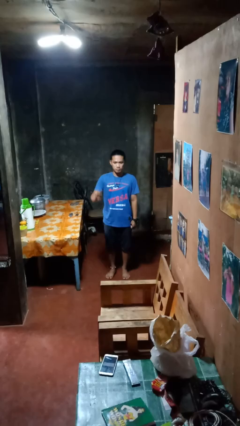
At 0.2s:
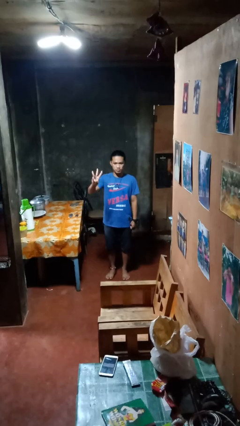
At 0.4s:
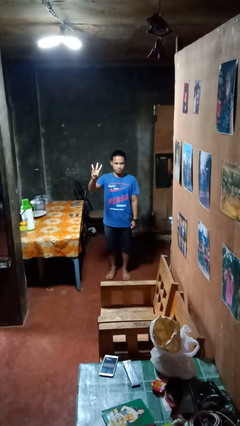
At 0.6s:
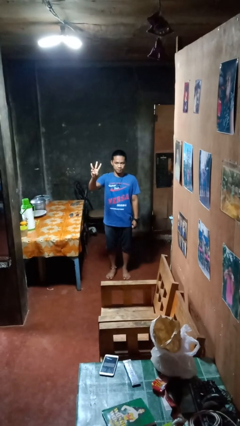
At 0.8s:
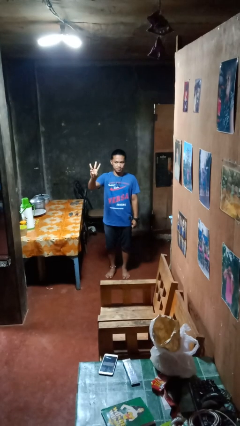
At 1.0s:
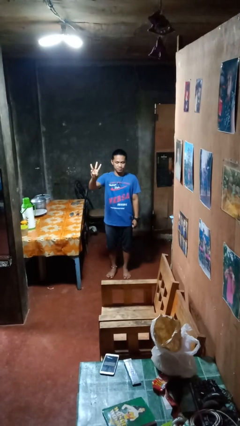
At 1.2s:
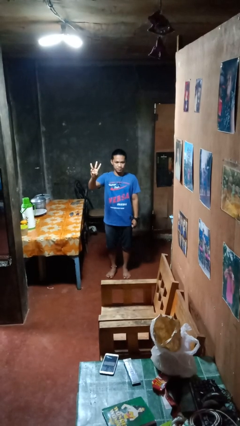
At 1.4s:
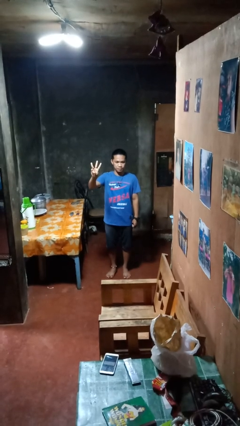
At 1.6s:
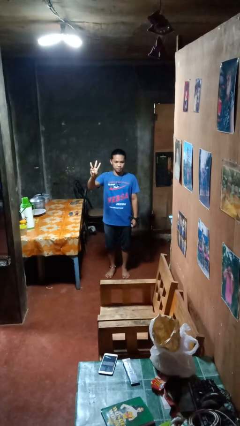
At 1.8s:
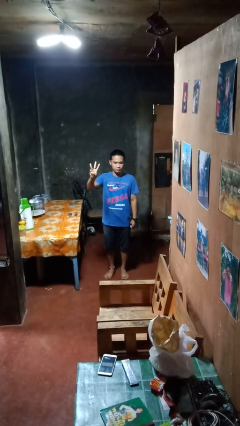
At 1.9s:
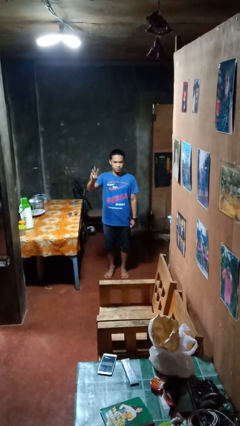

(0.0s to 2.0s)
person gestures number three

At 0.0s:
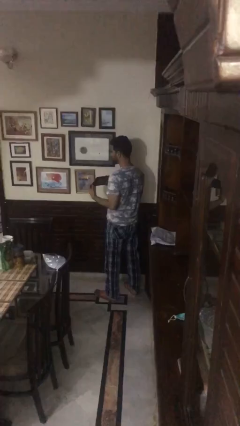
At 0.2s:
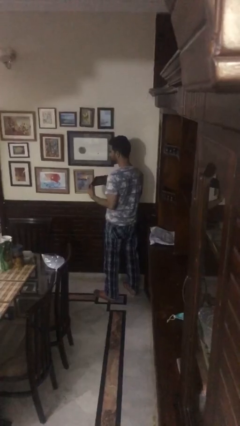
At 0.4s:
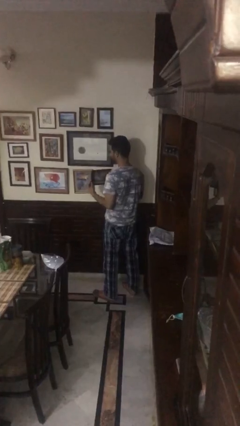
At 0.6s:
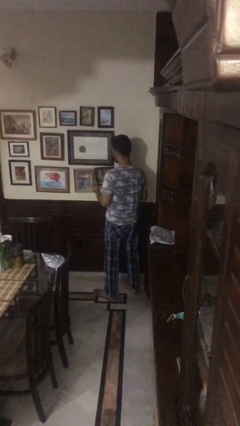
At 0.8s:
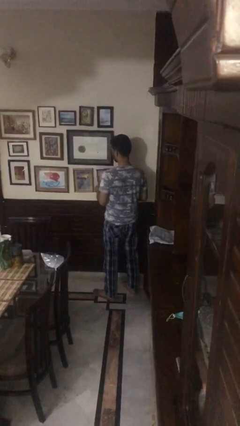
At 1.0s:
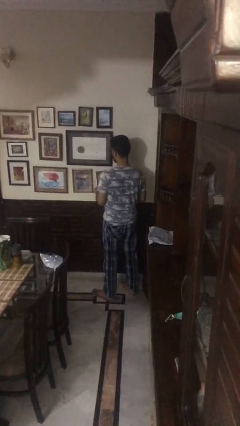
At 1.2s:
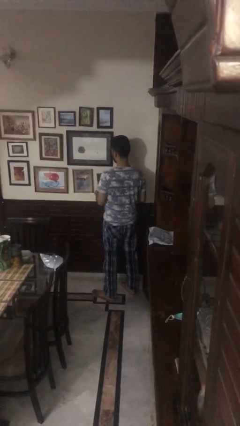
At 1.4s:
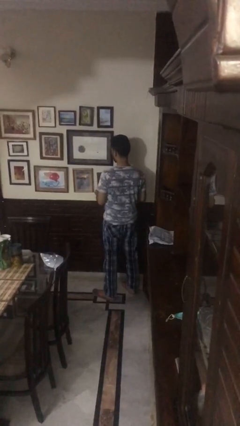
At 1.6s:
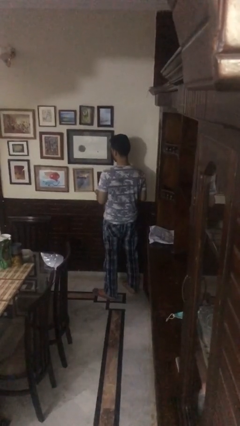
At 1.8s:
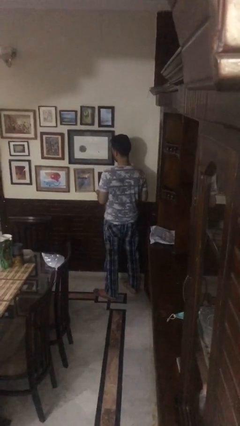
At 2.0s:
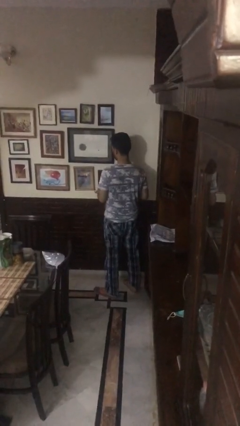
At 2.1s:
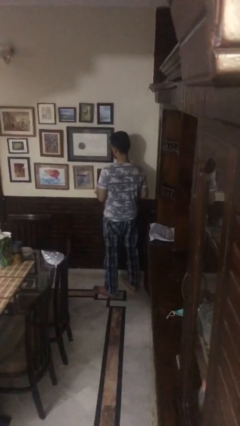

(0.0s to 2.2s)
person puts up picture frame

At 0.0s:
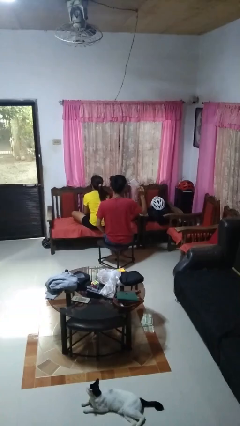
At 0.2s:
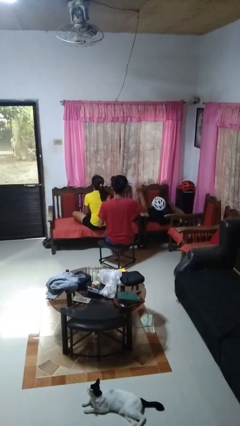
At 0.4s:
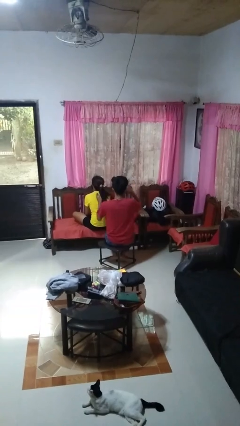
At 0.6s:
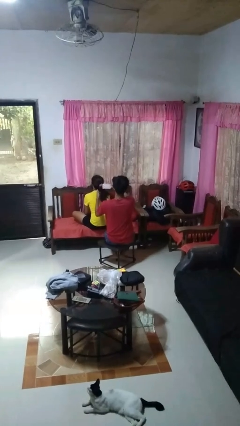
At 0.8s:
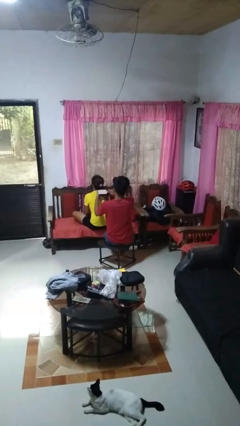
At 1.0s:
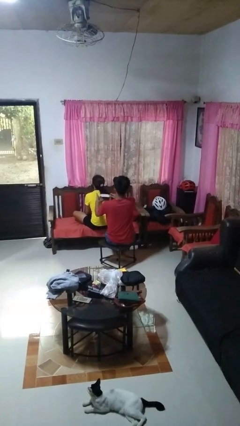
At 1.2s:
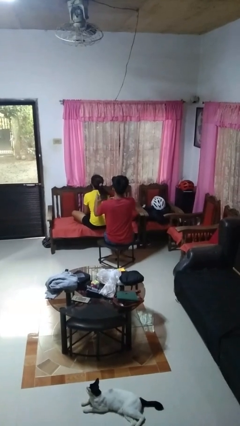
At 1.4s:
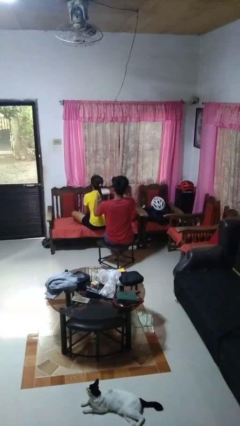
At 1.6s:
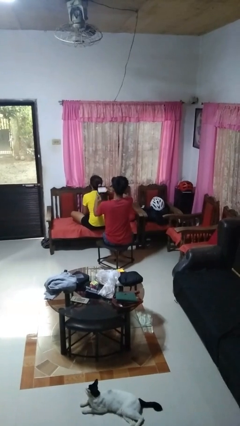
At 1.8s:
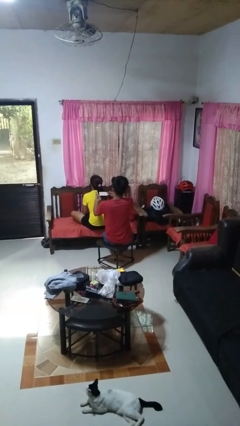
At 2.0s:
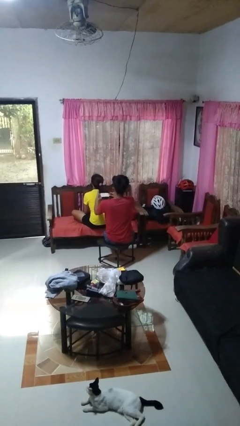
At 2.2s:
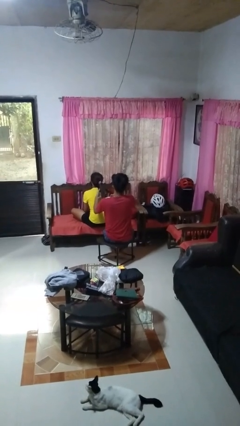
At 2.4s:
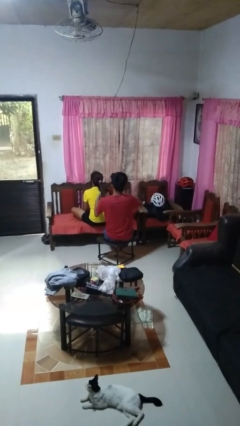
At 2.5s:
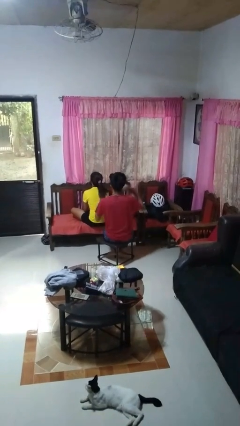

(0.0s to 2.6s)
person brushes hair of person

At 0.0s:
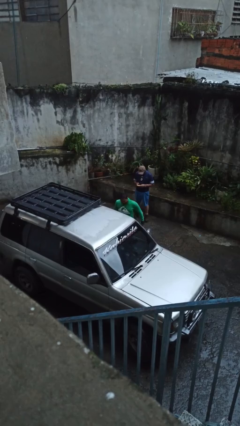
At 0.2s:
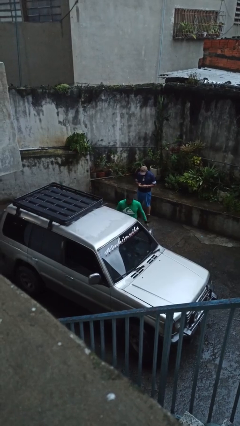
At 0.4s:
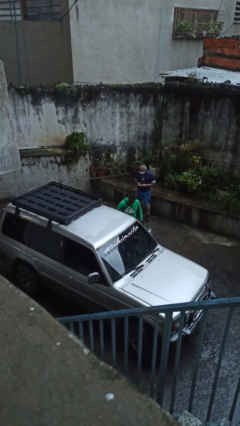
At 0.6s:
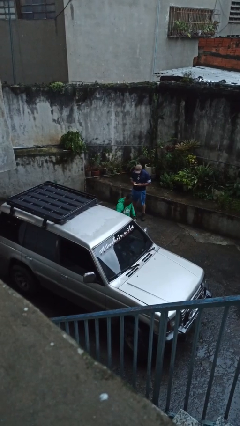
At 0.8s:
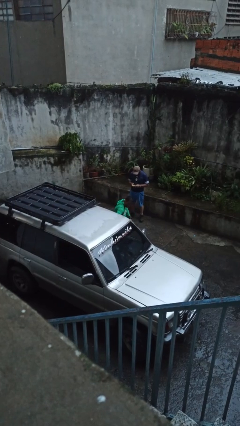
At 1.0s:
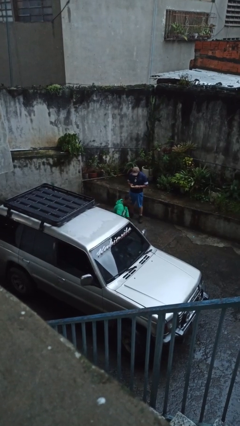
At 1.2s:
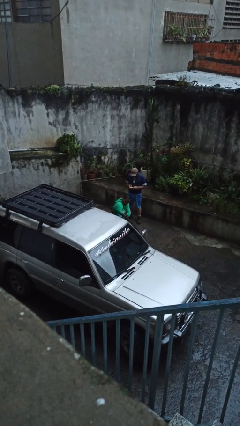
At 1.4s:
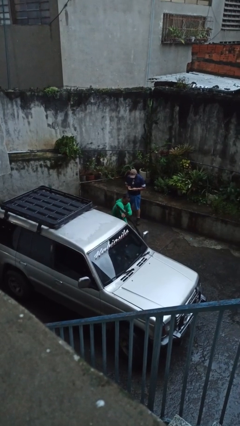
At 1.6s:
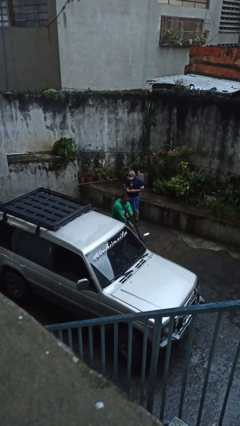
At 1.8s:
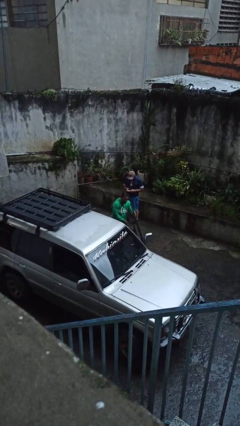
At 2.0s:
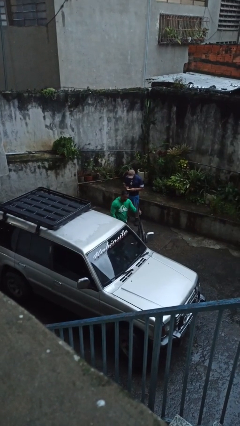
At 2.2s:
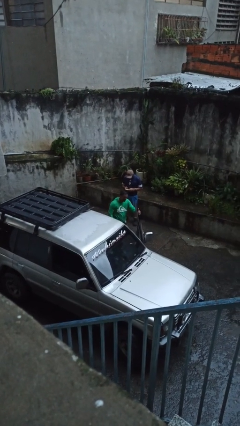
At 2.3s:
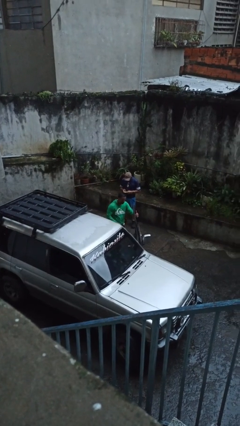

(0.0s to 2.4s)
person opens car door

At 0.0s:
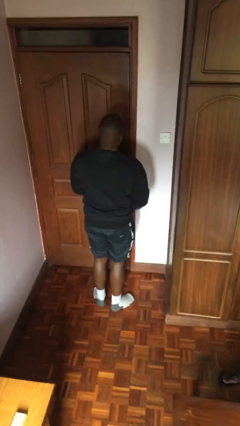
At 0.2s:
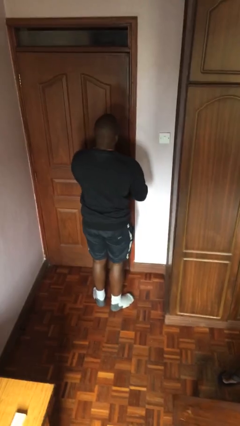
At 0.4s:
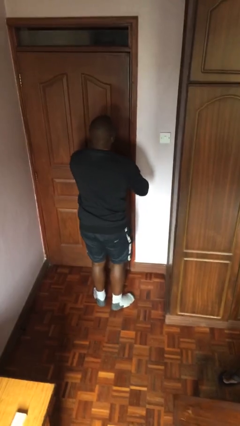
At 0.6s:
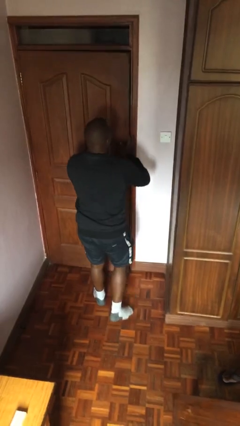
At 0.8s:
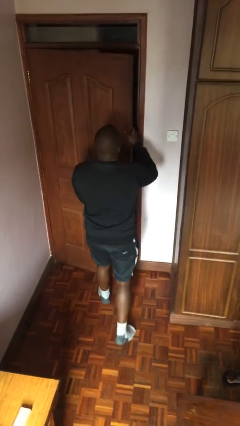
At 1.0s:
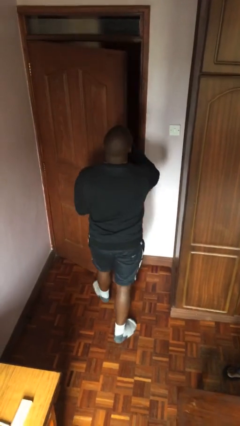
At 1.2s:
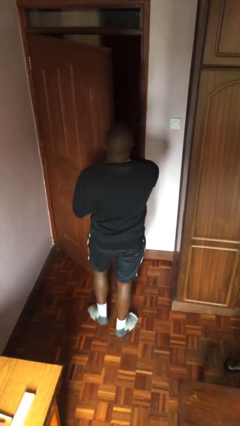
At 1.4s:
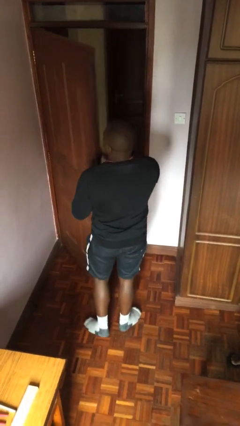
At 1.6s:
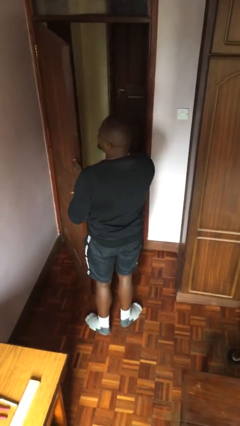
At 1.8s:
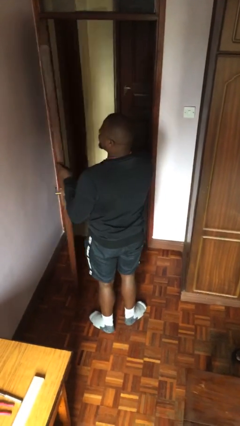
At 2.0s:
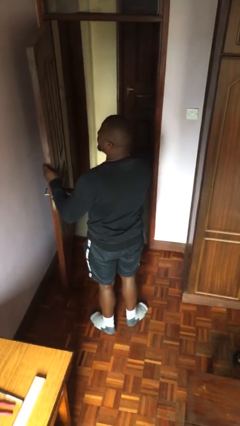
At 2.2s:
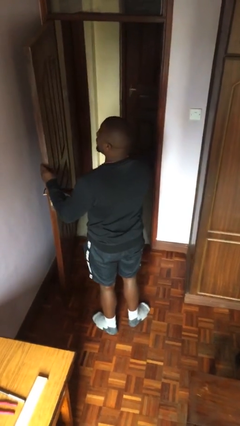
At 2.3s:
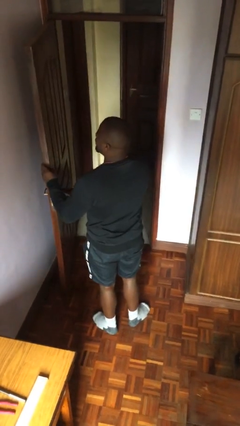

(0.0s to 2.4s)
person opens facility door

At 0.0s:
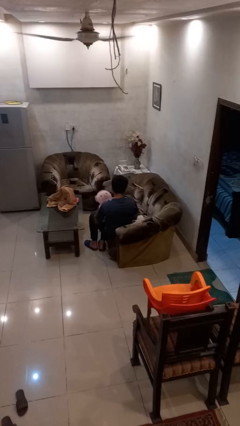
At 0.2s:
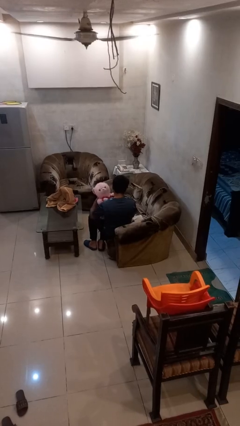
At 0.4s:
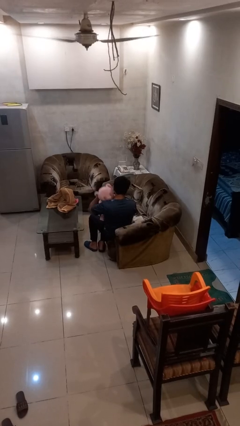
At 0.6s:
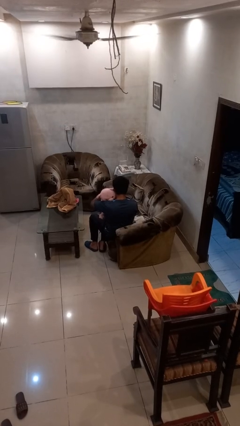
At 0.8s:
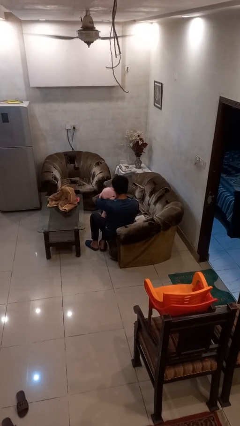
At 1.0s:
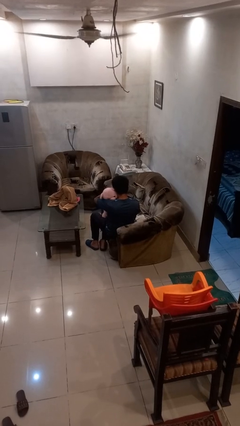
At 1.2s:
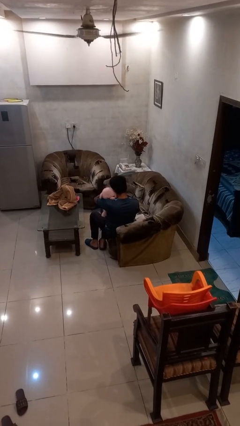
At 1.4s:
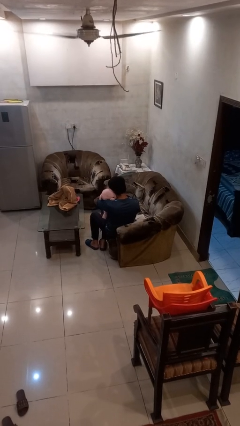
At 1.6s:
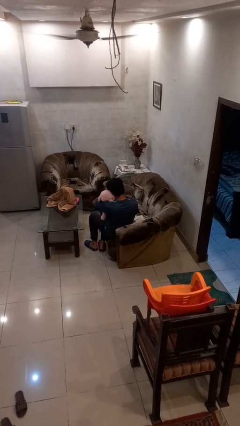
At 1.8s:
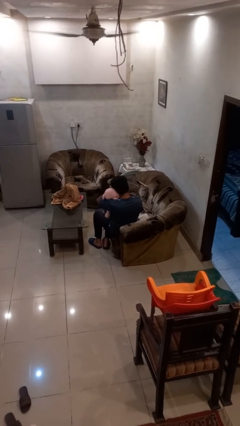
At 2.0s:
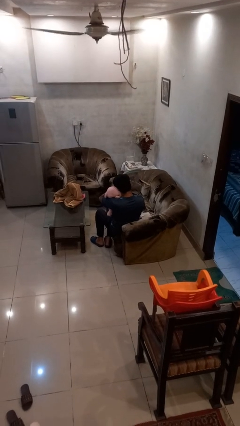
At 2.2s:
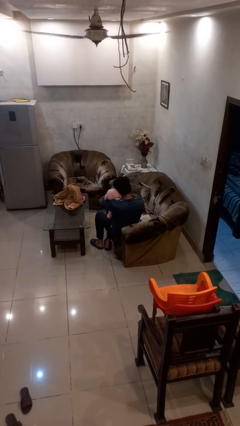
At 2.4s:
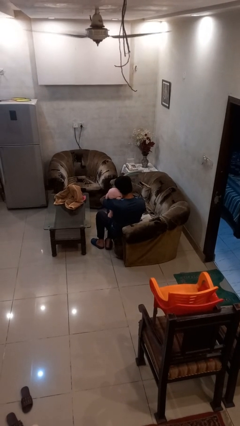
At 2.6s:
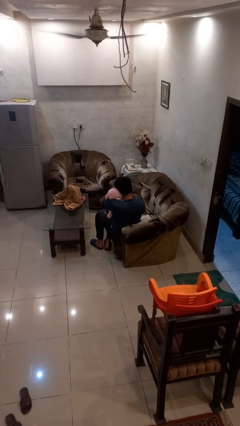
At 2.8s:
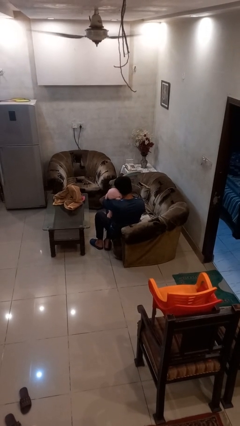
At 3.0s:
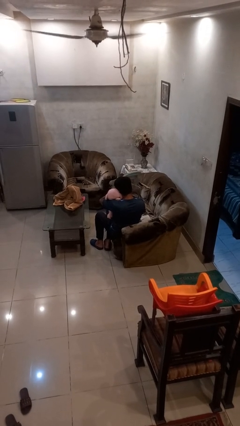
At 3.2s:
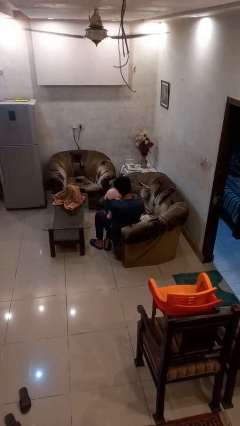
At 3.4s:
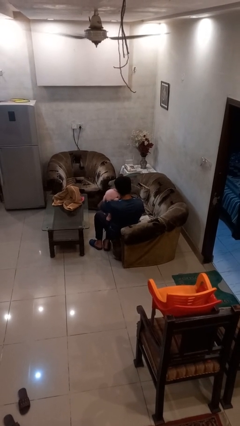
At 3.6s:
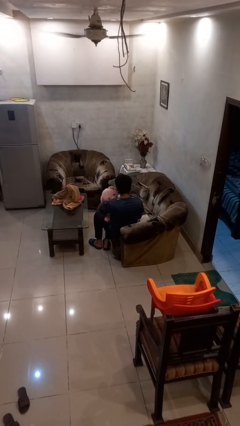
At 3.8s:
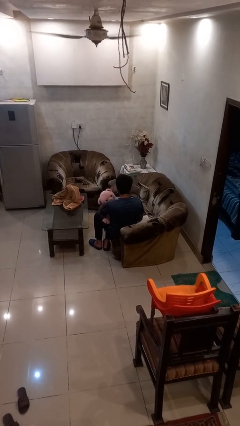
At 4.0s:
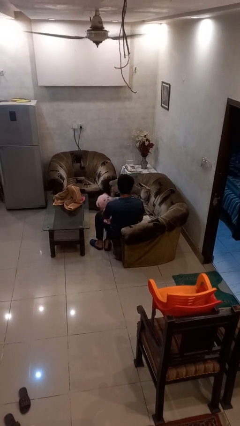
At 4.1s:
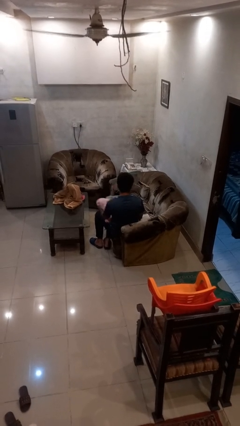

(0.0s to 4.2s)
person hugs stuffed animal

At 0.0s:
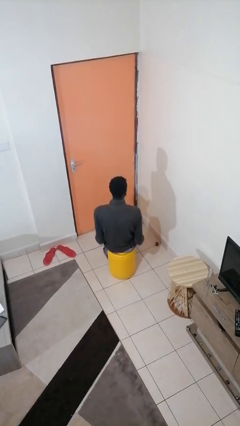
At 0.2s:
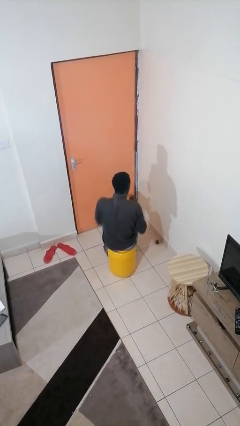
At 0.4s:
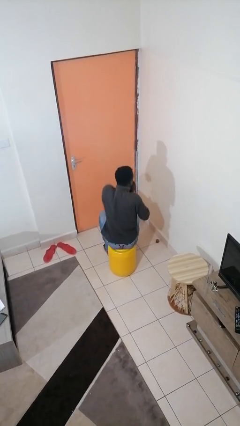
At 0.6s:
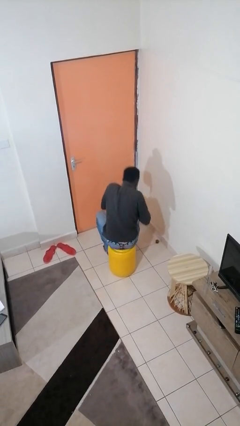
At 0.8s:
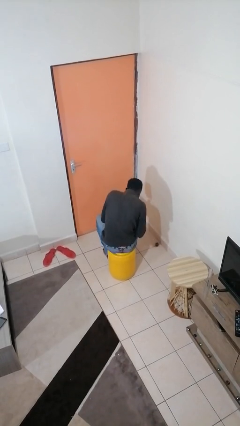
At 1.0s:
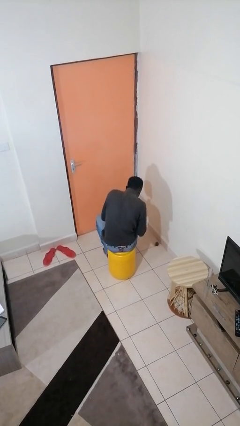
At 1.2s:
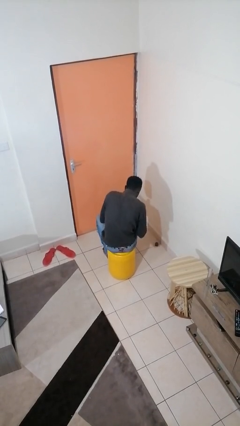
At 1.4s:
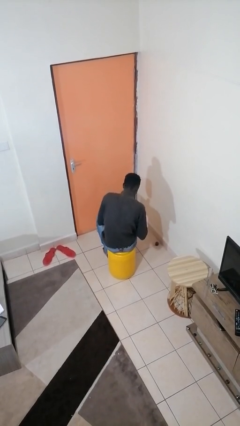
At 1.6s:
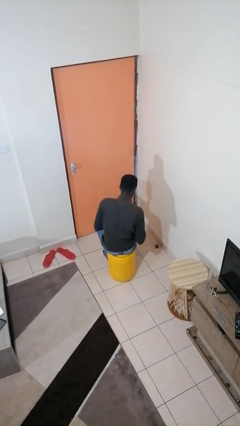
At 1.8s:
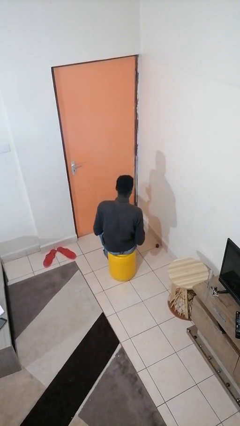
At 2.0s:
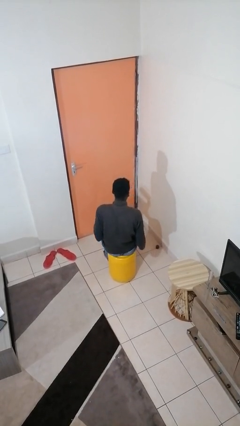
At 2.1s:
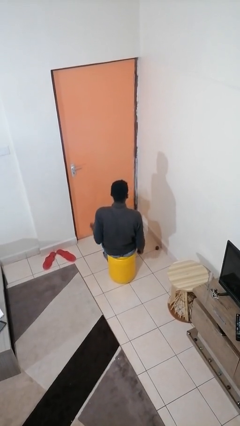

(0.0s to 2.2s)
person sneezes into hand
